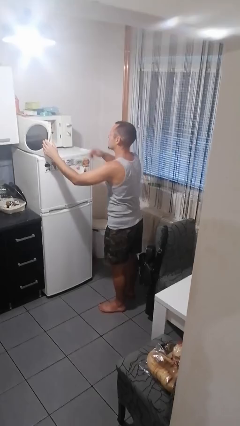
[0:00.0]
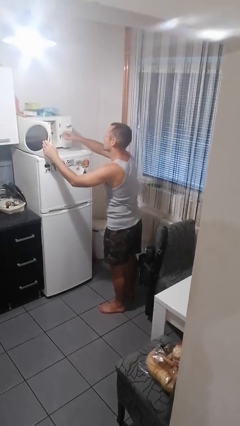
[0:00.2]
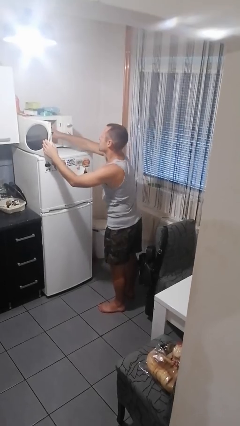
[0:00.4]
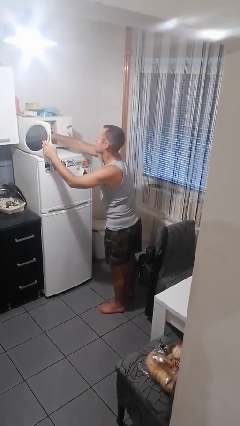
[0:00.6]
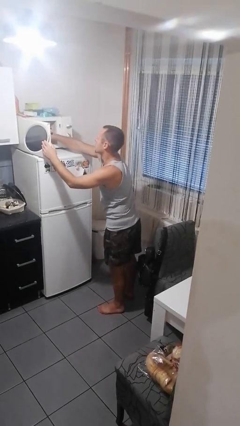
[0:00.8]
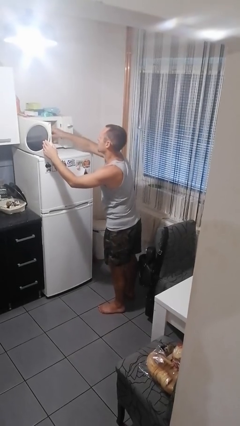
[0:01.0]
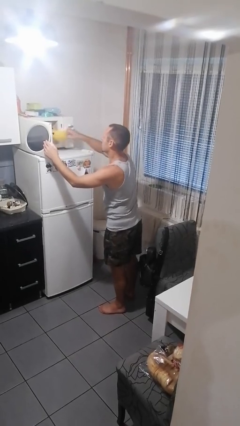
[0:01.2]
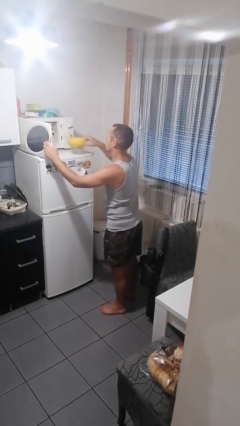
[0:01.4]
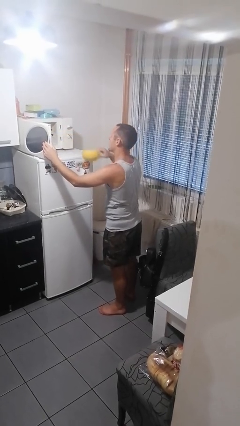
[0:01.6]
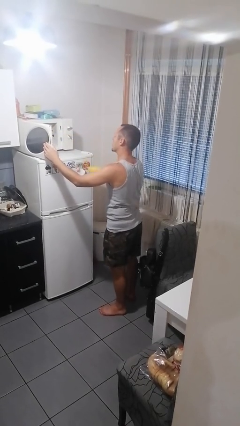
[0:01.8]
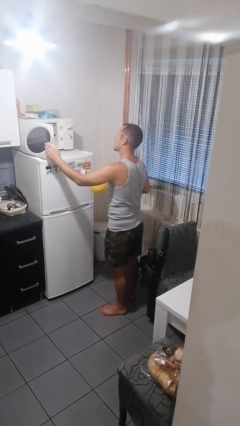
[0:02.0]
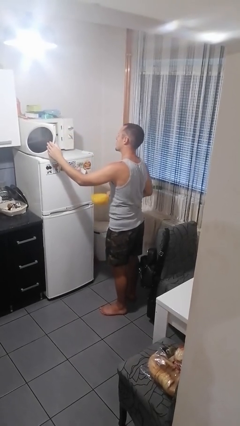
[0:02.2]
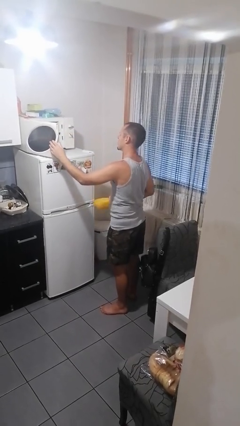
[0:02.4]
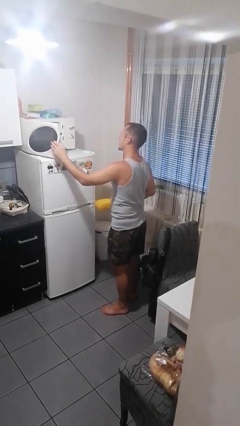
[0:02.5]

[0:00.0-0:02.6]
person takes object from microwave

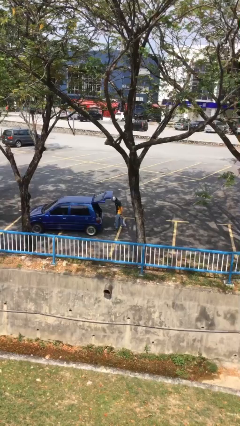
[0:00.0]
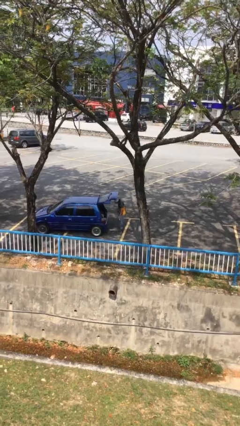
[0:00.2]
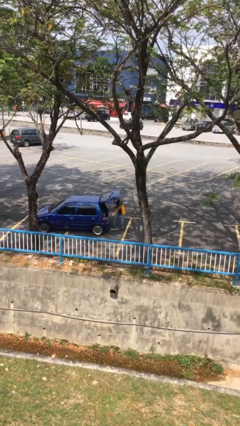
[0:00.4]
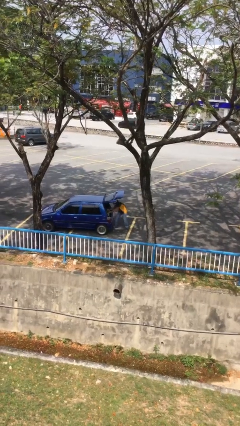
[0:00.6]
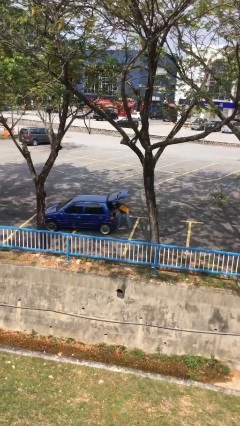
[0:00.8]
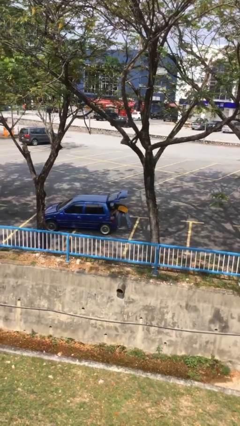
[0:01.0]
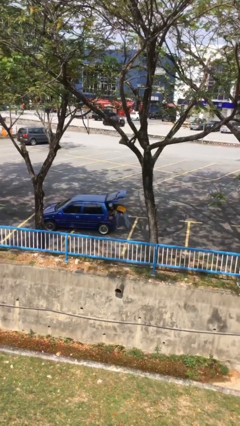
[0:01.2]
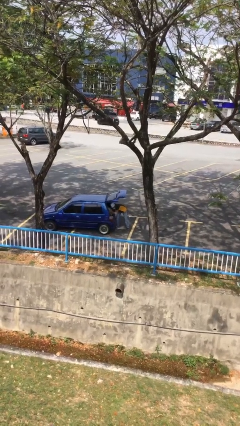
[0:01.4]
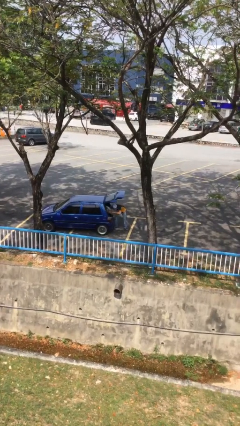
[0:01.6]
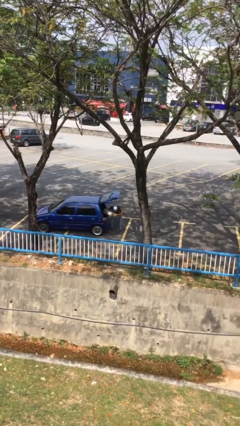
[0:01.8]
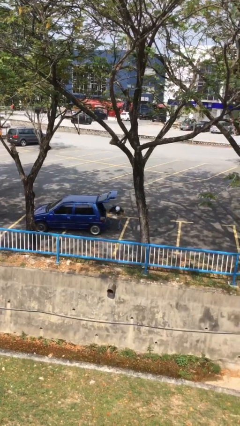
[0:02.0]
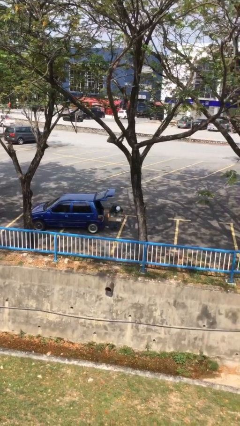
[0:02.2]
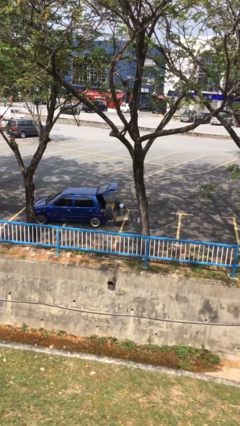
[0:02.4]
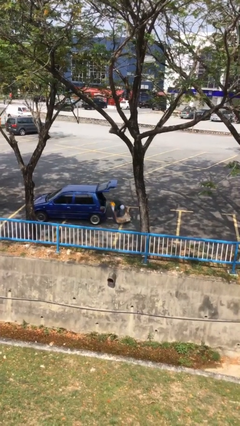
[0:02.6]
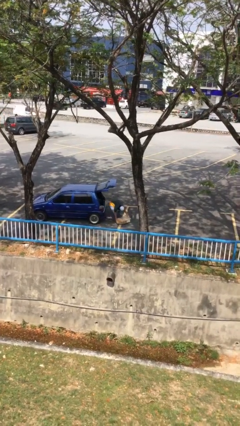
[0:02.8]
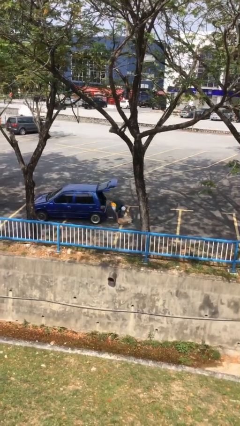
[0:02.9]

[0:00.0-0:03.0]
person unloads car

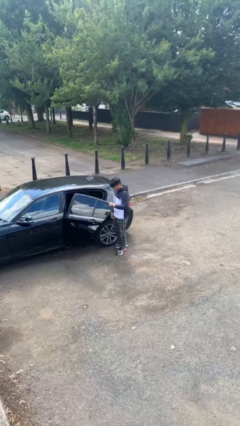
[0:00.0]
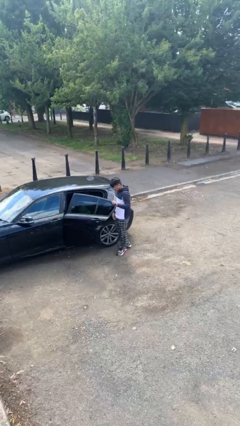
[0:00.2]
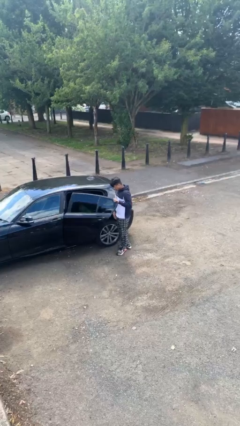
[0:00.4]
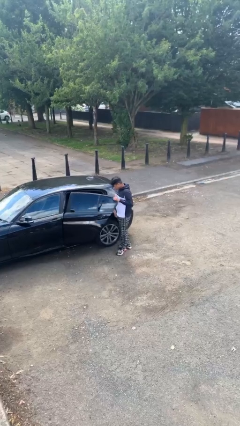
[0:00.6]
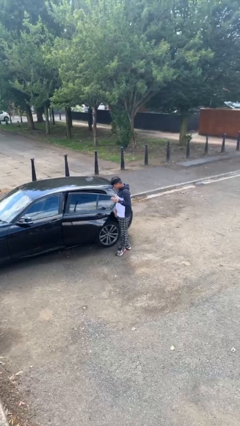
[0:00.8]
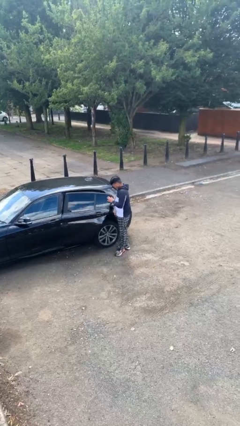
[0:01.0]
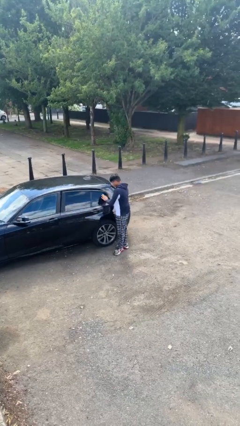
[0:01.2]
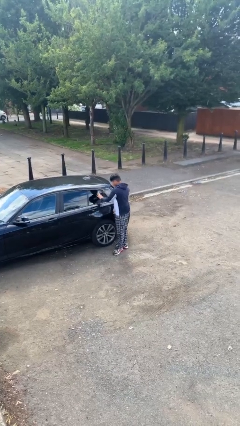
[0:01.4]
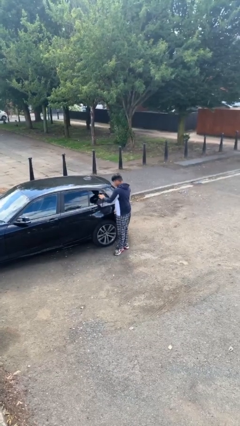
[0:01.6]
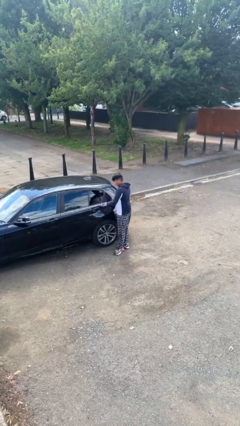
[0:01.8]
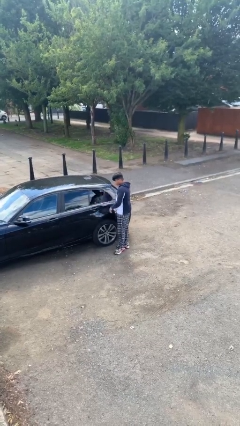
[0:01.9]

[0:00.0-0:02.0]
person closes car door

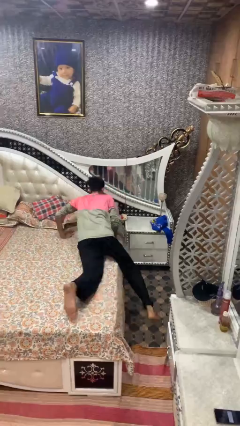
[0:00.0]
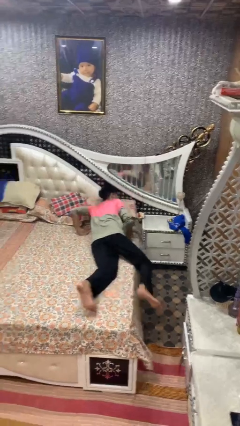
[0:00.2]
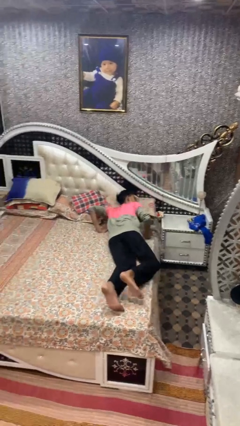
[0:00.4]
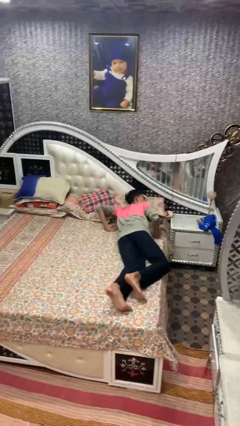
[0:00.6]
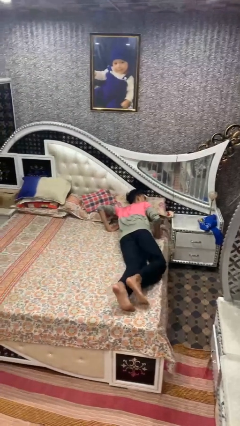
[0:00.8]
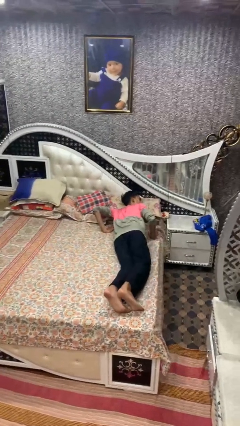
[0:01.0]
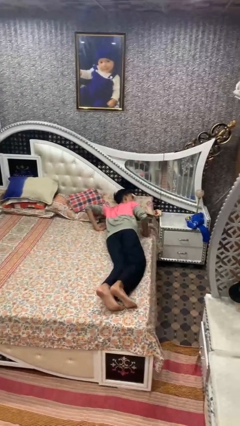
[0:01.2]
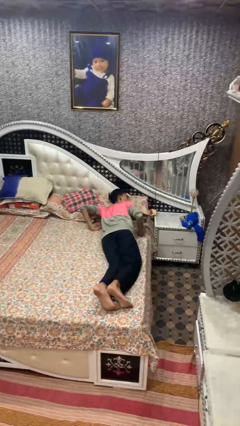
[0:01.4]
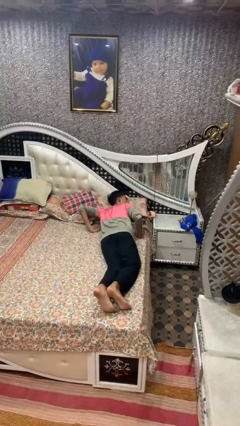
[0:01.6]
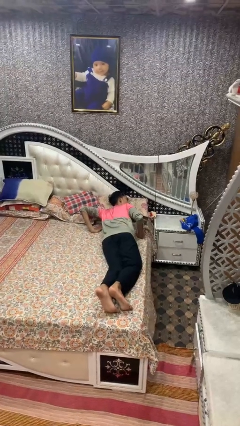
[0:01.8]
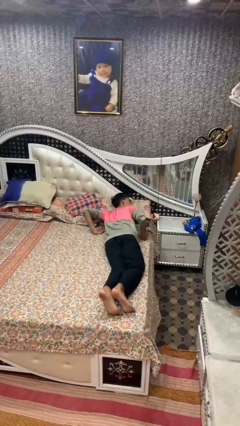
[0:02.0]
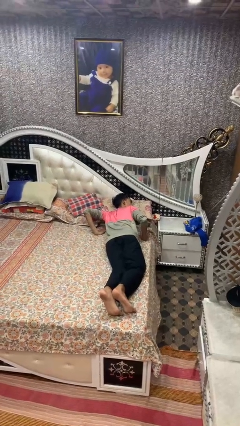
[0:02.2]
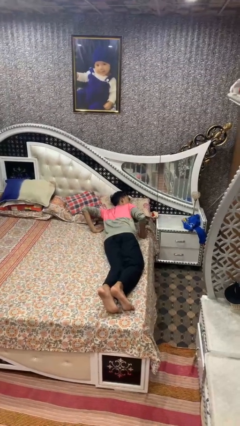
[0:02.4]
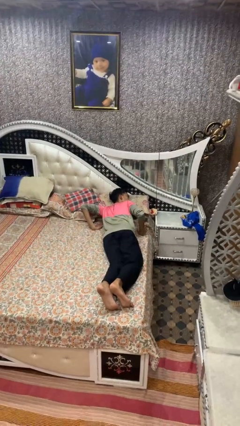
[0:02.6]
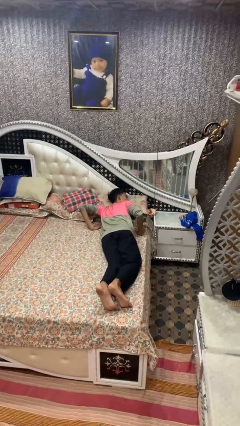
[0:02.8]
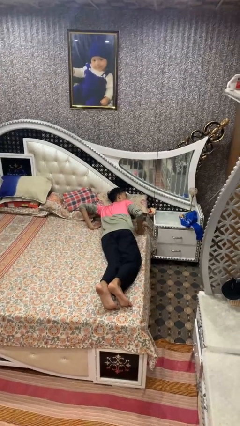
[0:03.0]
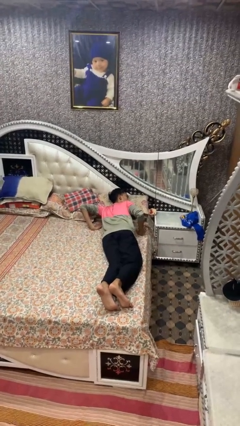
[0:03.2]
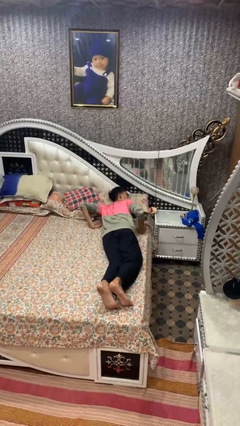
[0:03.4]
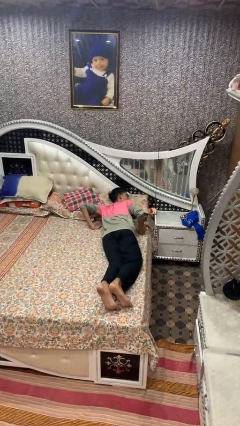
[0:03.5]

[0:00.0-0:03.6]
person lies down on bed

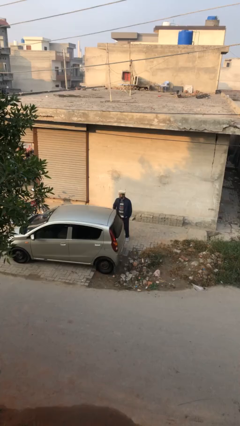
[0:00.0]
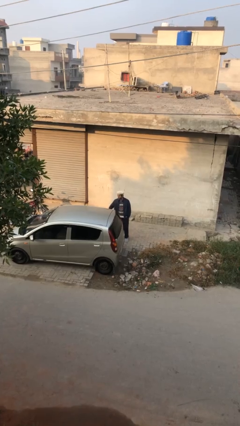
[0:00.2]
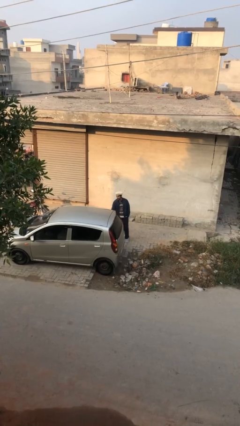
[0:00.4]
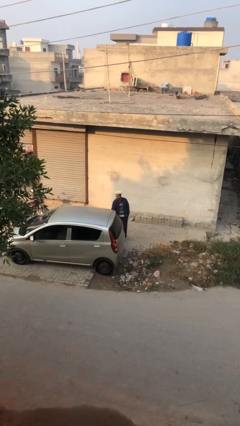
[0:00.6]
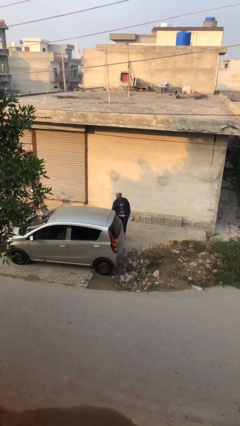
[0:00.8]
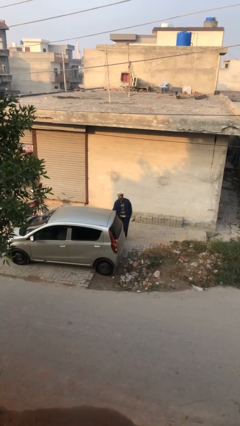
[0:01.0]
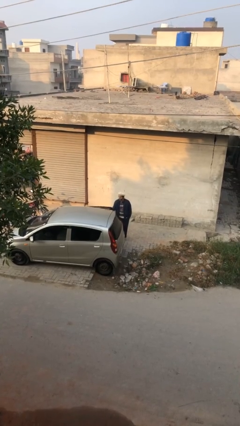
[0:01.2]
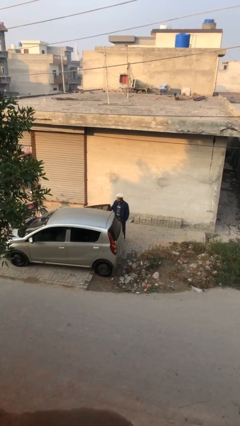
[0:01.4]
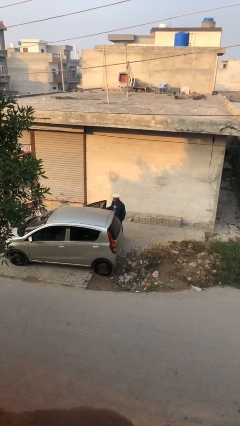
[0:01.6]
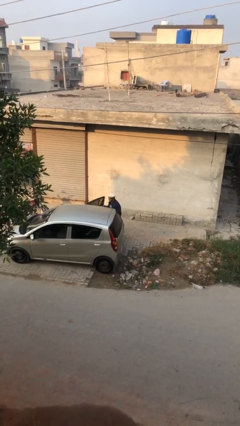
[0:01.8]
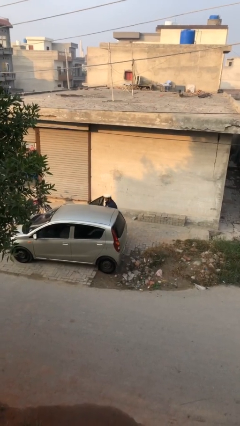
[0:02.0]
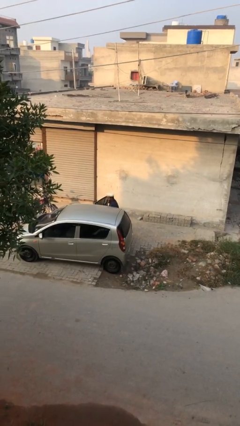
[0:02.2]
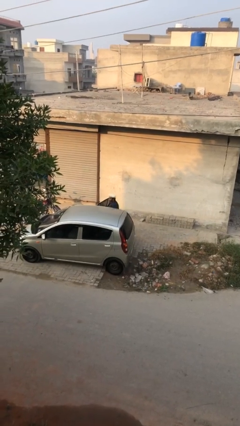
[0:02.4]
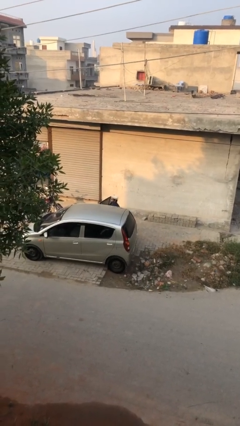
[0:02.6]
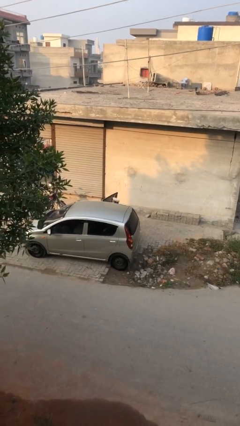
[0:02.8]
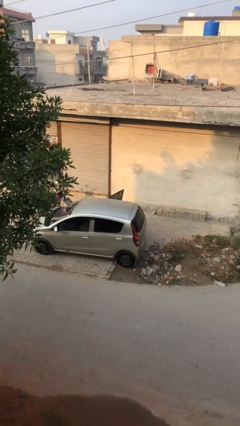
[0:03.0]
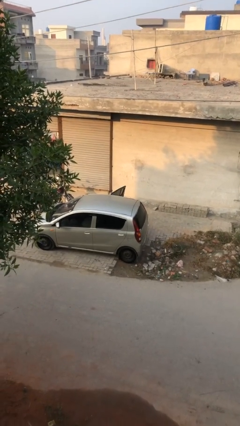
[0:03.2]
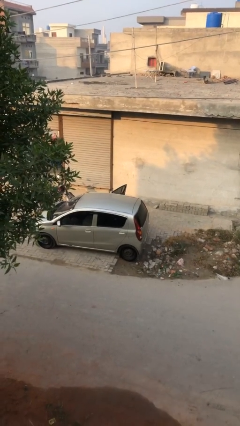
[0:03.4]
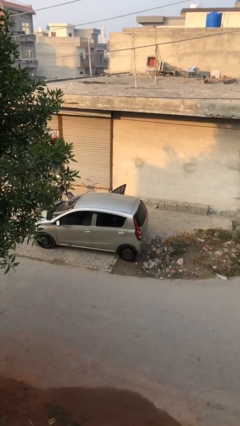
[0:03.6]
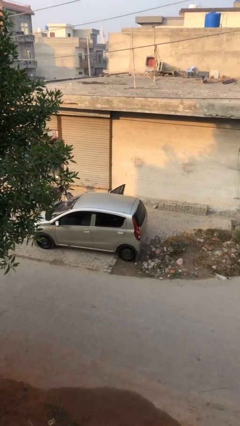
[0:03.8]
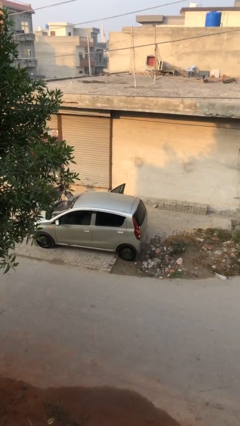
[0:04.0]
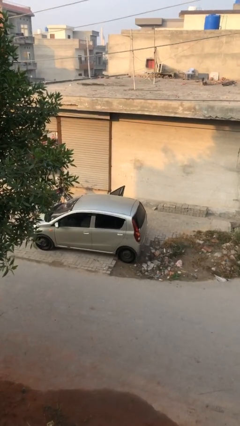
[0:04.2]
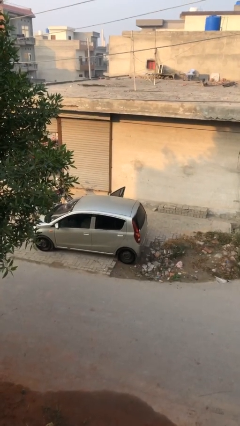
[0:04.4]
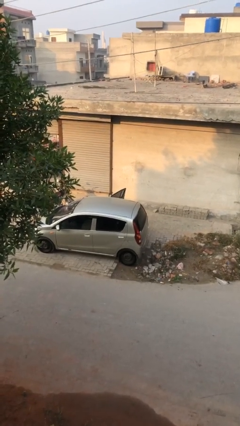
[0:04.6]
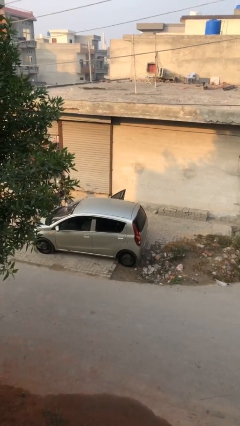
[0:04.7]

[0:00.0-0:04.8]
person enters car

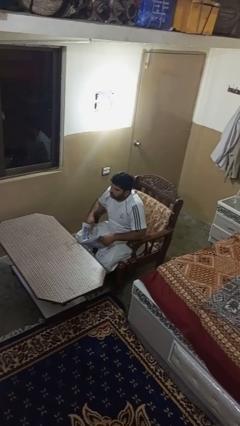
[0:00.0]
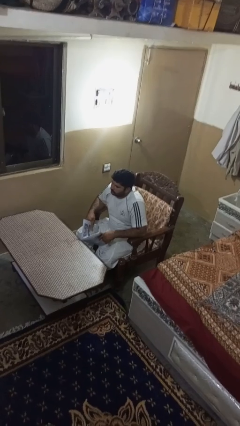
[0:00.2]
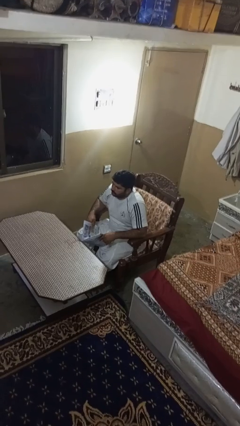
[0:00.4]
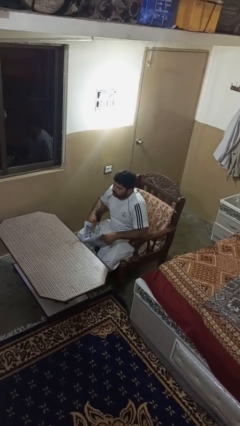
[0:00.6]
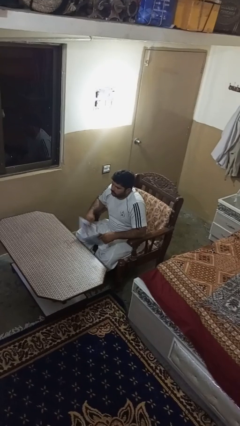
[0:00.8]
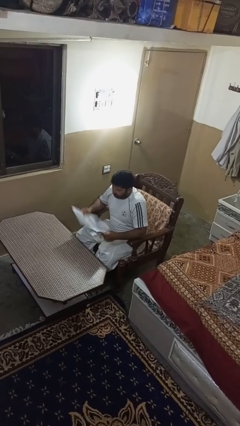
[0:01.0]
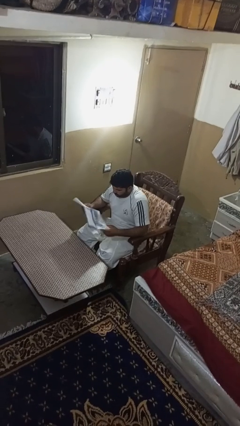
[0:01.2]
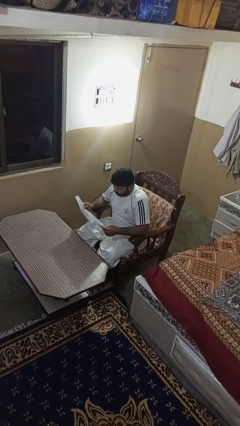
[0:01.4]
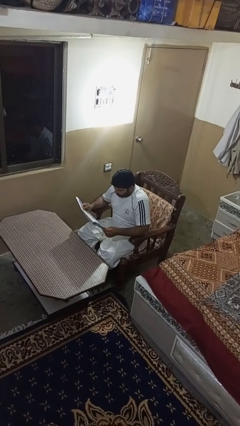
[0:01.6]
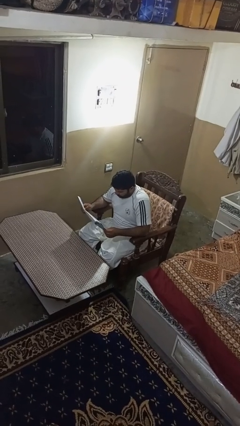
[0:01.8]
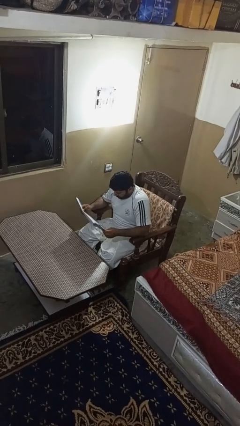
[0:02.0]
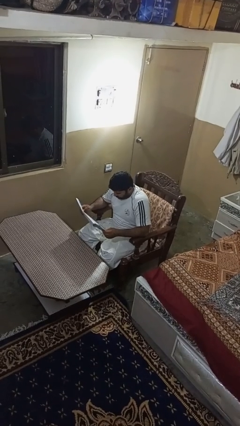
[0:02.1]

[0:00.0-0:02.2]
person reads newspaper
